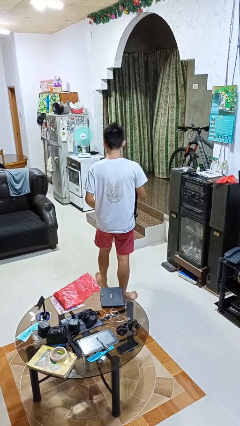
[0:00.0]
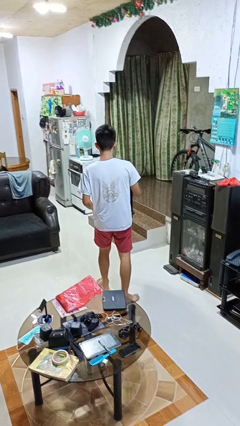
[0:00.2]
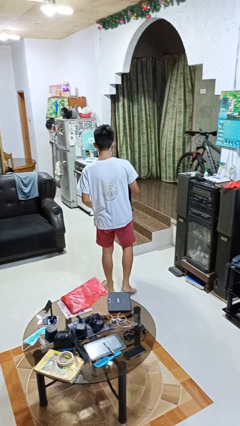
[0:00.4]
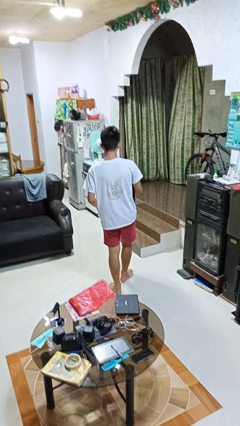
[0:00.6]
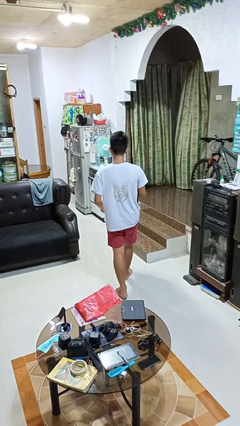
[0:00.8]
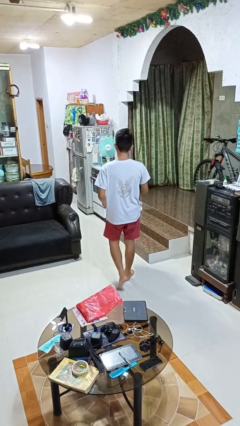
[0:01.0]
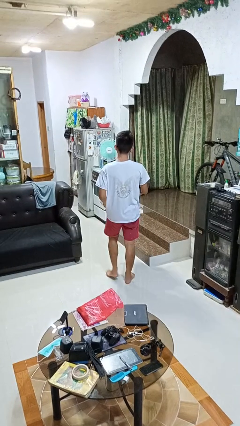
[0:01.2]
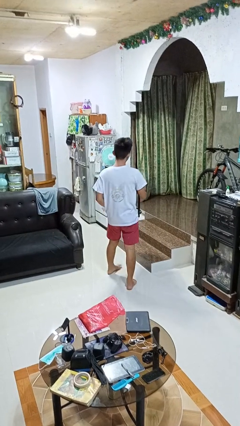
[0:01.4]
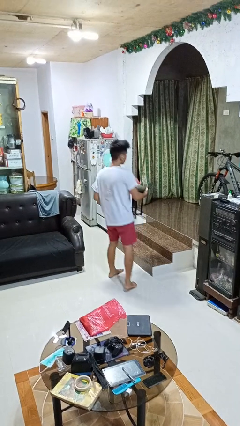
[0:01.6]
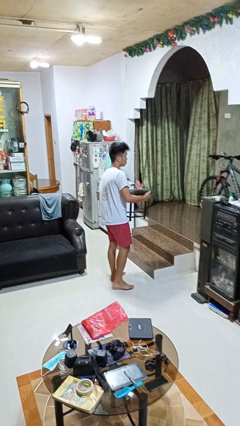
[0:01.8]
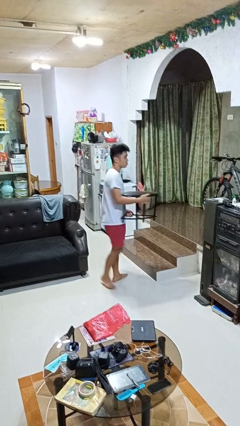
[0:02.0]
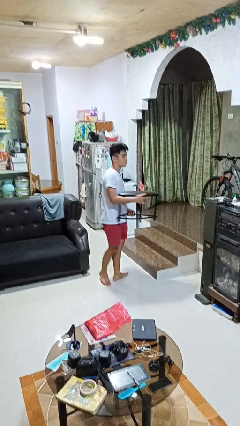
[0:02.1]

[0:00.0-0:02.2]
person carries furniture

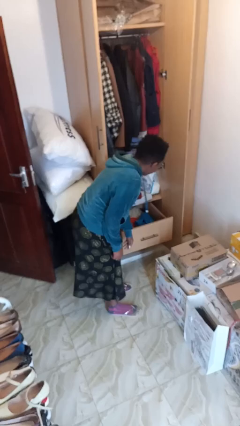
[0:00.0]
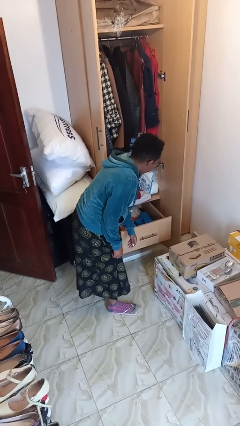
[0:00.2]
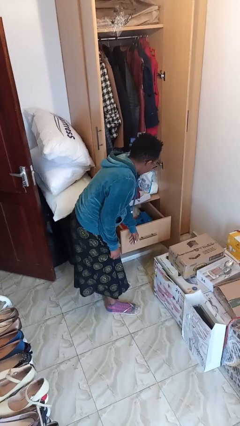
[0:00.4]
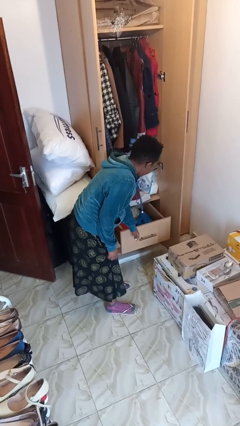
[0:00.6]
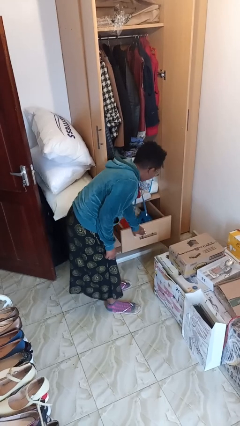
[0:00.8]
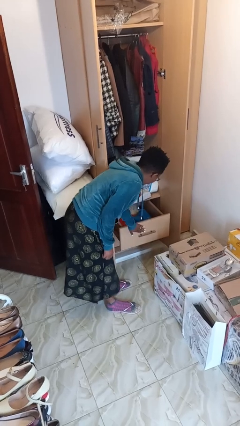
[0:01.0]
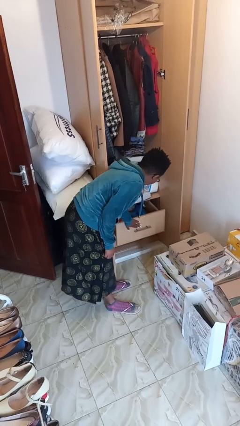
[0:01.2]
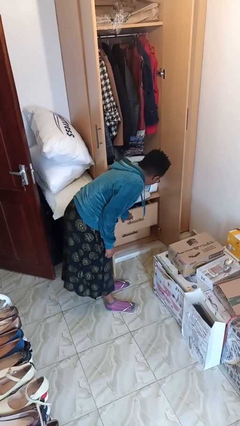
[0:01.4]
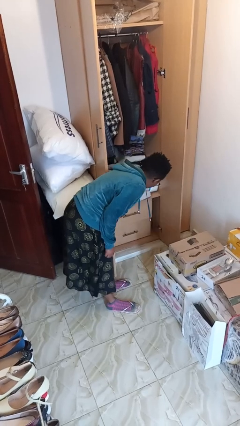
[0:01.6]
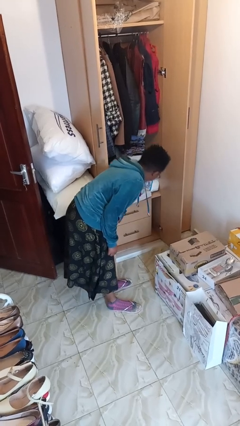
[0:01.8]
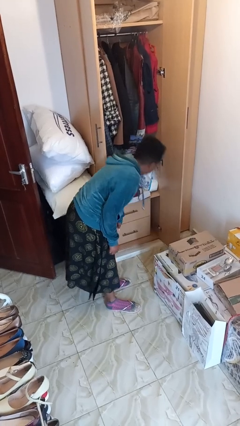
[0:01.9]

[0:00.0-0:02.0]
person closes dresser drawer

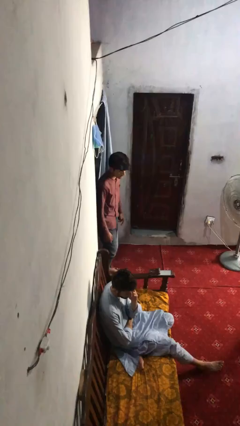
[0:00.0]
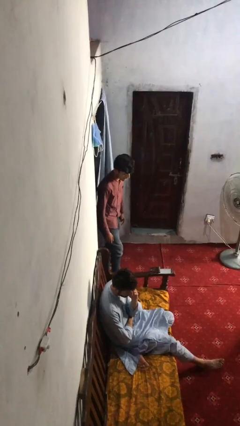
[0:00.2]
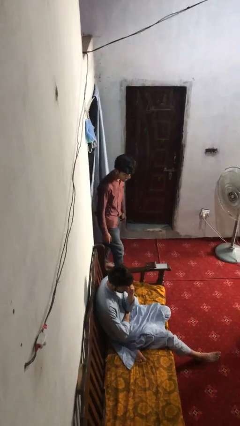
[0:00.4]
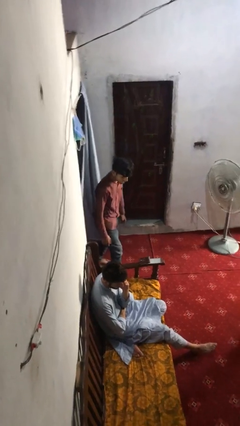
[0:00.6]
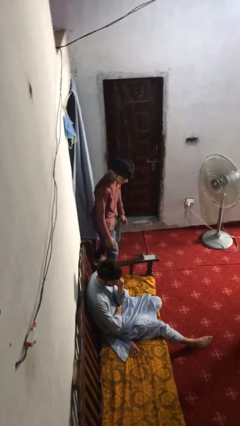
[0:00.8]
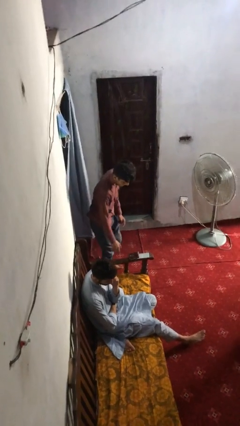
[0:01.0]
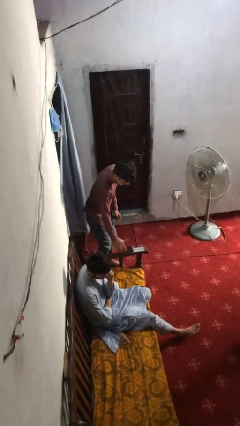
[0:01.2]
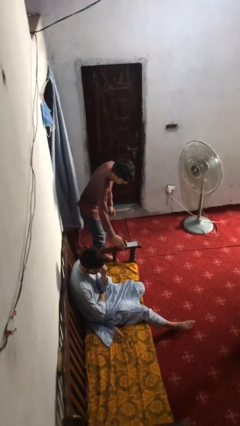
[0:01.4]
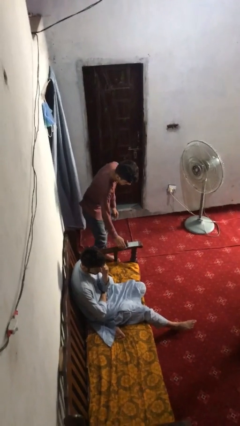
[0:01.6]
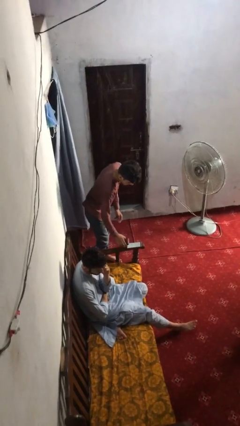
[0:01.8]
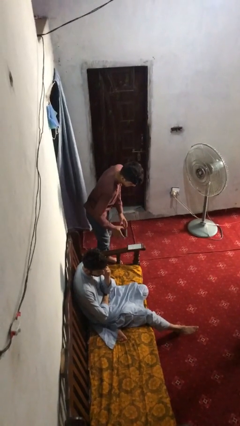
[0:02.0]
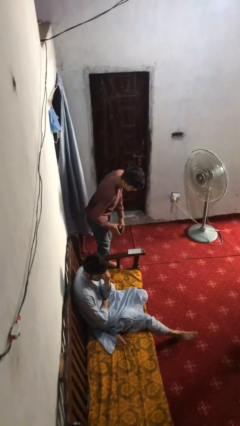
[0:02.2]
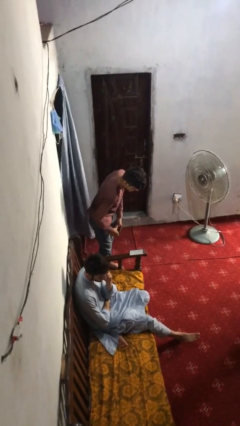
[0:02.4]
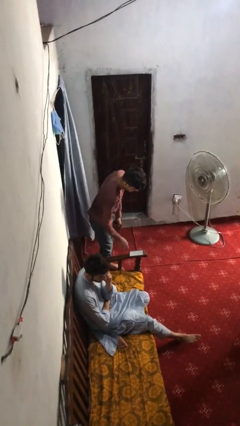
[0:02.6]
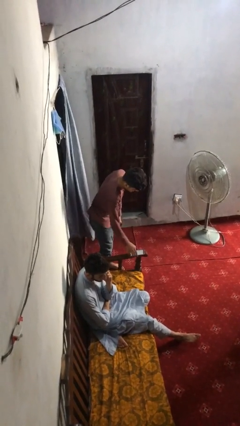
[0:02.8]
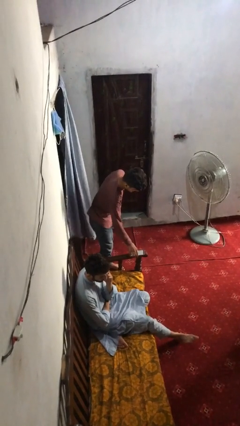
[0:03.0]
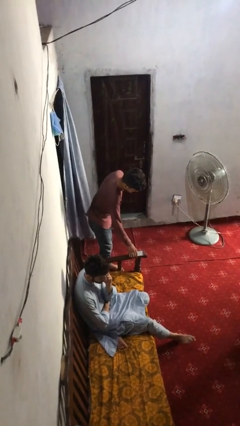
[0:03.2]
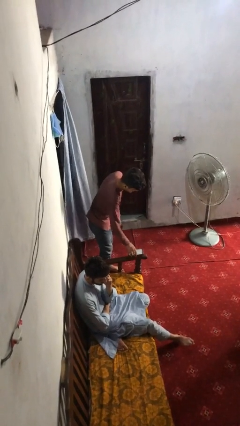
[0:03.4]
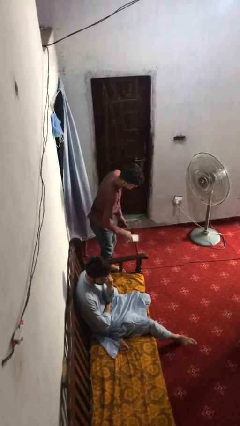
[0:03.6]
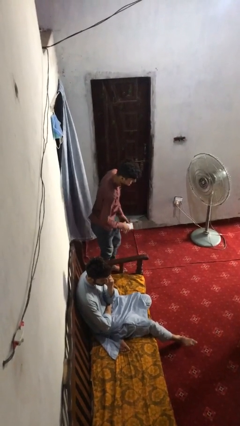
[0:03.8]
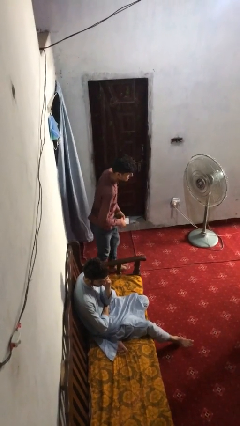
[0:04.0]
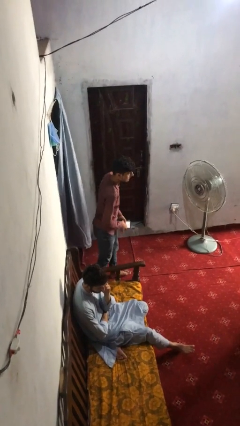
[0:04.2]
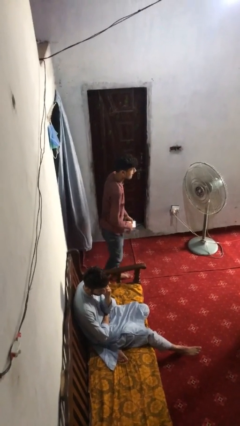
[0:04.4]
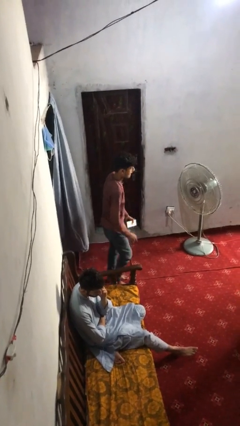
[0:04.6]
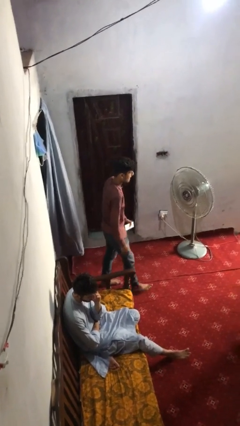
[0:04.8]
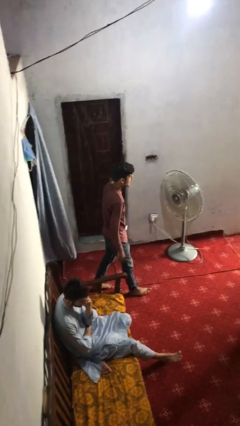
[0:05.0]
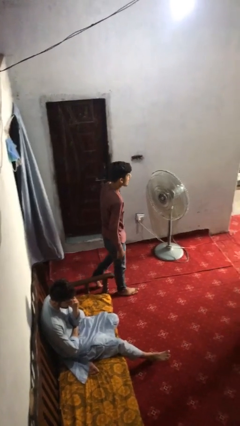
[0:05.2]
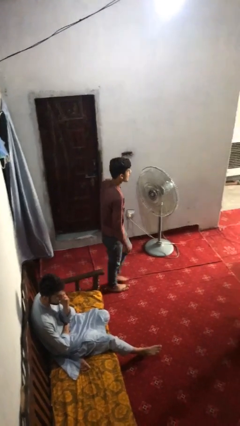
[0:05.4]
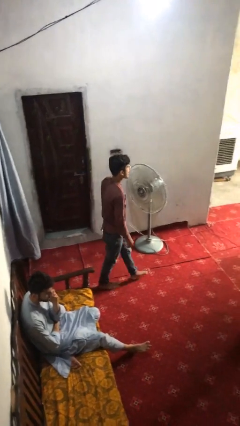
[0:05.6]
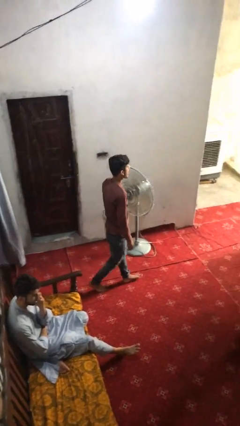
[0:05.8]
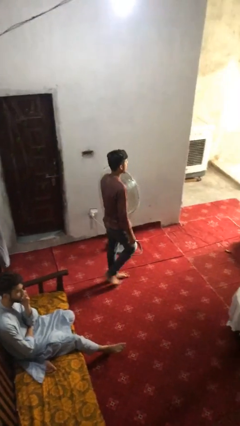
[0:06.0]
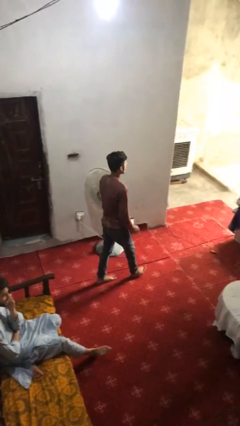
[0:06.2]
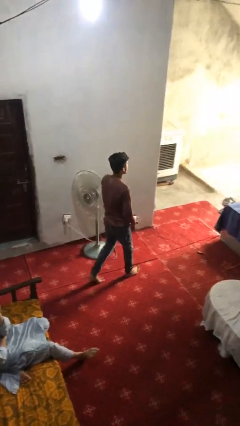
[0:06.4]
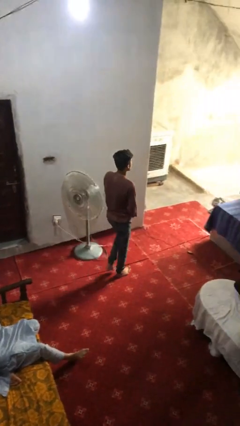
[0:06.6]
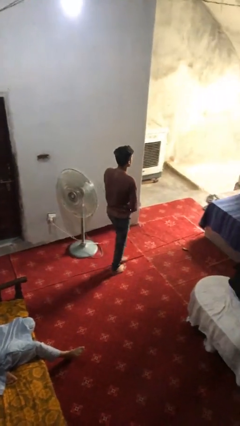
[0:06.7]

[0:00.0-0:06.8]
person steals object from person

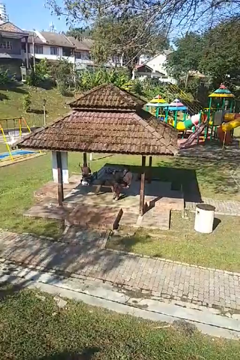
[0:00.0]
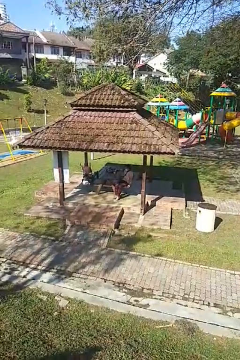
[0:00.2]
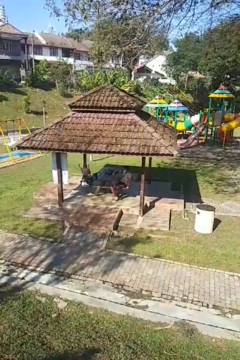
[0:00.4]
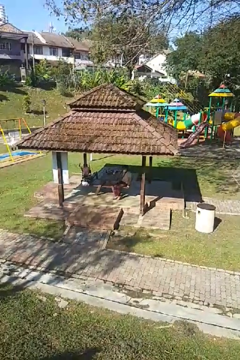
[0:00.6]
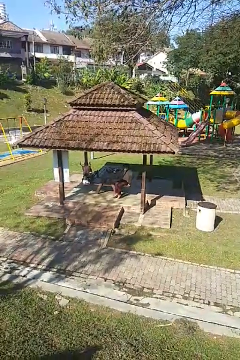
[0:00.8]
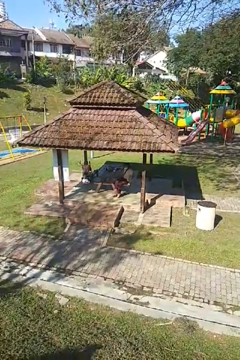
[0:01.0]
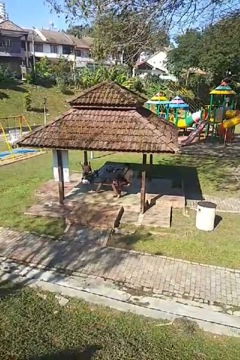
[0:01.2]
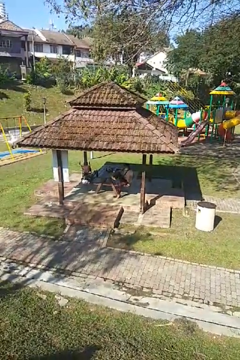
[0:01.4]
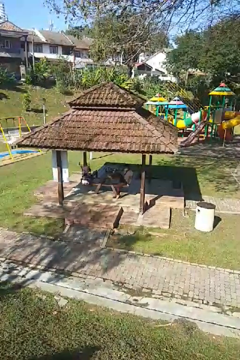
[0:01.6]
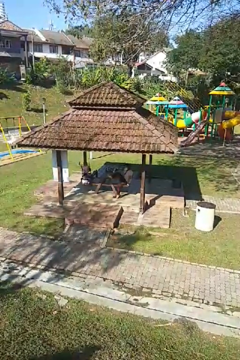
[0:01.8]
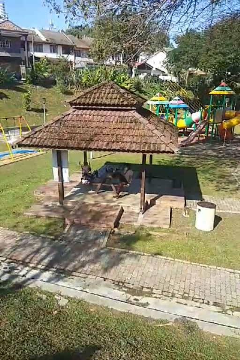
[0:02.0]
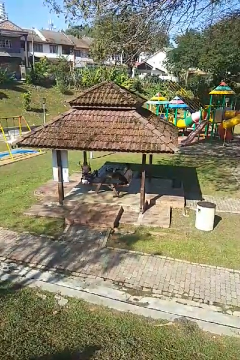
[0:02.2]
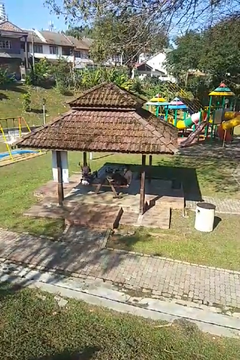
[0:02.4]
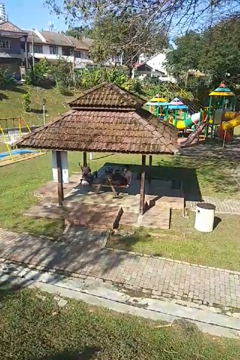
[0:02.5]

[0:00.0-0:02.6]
person puts feet up

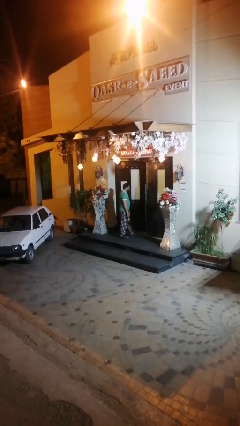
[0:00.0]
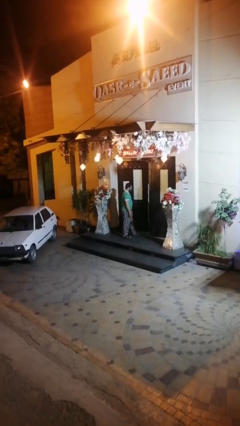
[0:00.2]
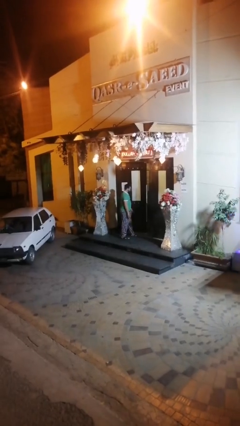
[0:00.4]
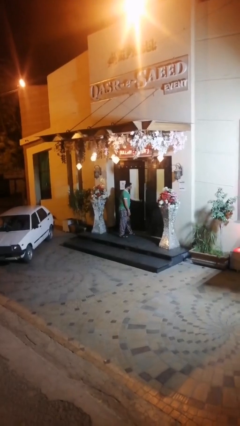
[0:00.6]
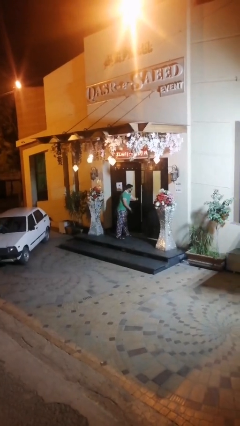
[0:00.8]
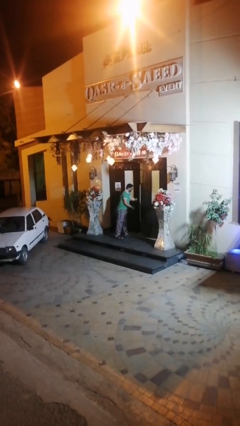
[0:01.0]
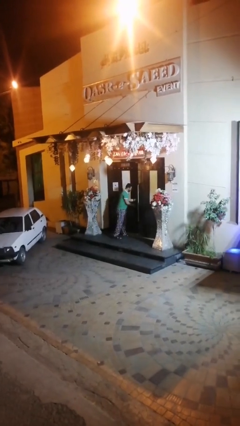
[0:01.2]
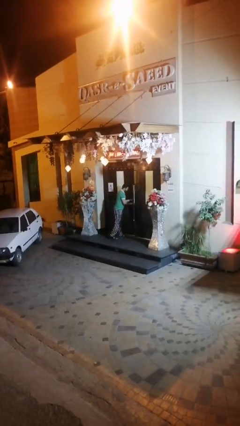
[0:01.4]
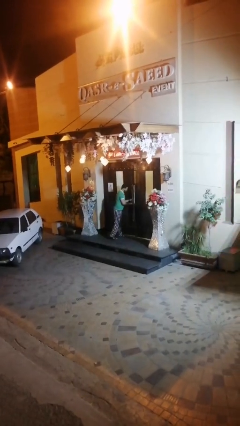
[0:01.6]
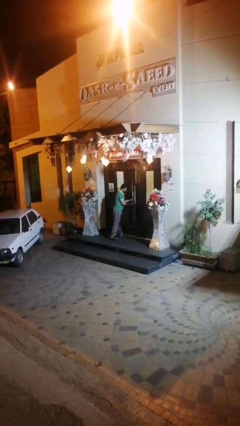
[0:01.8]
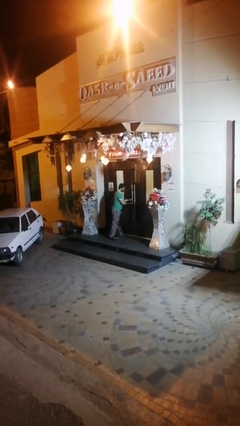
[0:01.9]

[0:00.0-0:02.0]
person closes facility door

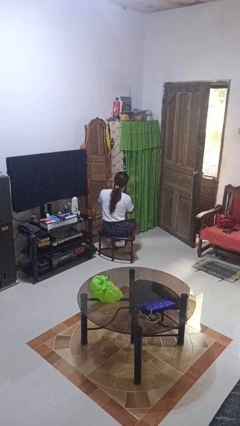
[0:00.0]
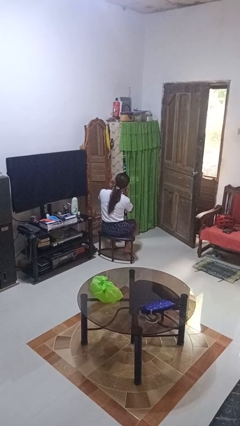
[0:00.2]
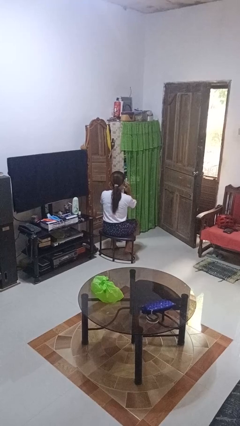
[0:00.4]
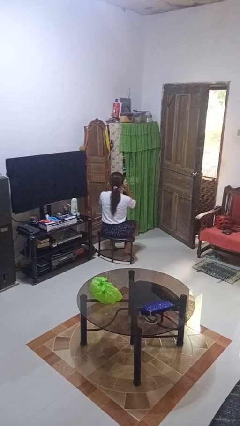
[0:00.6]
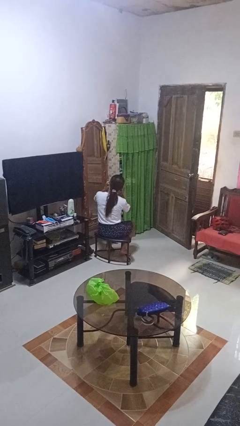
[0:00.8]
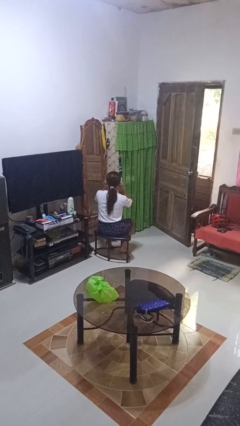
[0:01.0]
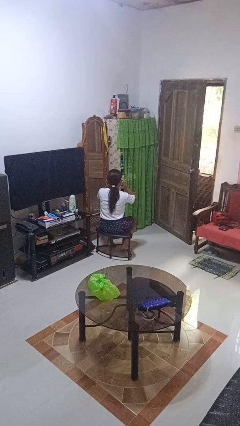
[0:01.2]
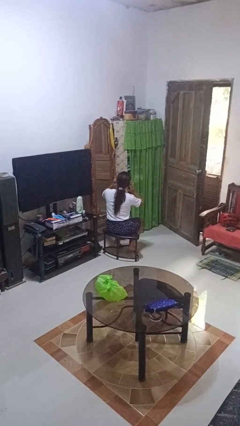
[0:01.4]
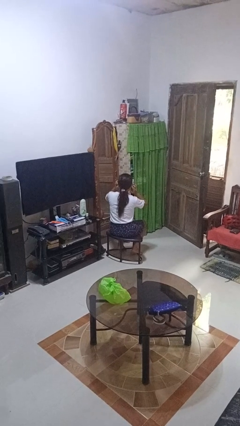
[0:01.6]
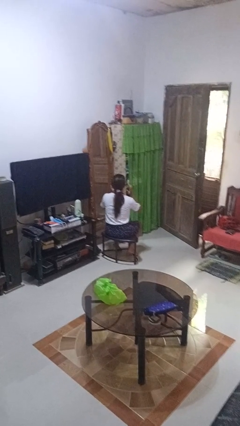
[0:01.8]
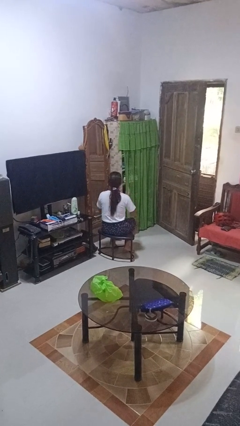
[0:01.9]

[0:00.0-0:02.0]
person puts fingers in ear

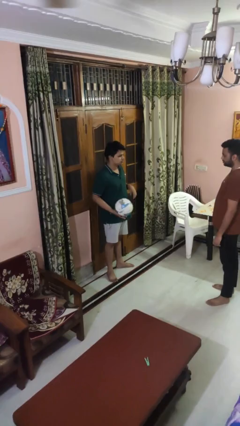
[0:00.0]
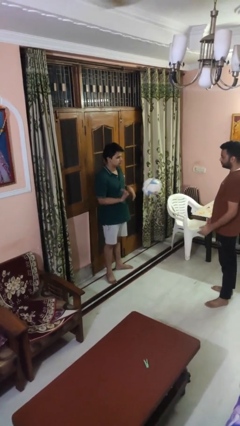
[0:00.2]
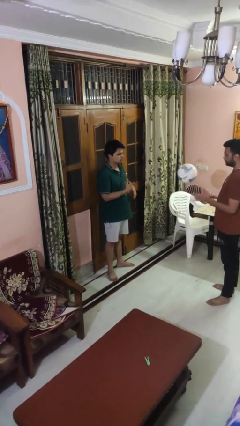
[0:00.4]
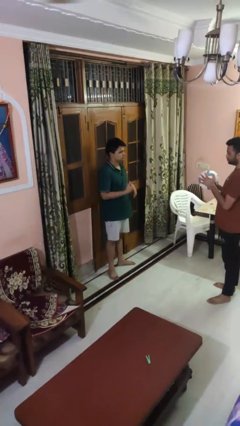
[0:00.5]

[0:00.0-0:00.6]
person throws object to person
